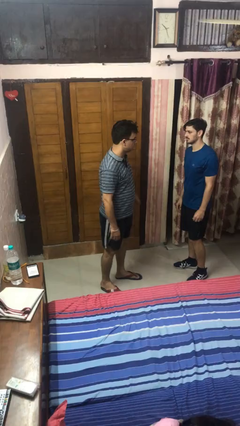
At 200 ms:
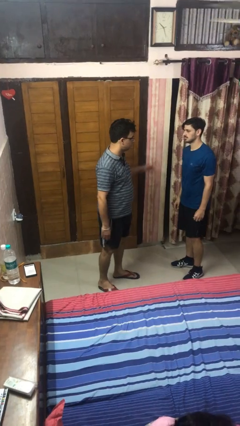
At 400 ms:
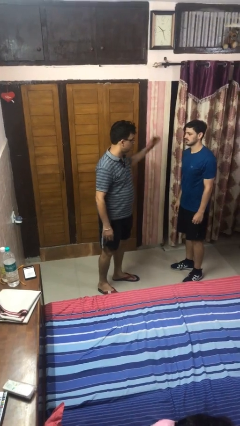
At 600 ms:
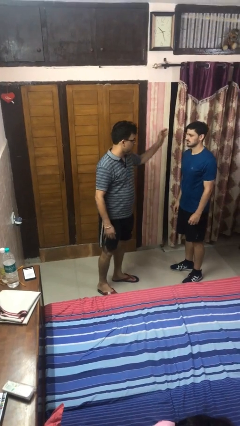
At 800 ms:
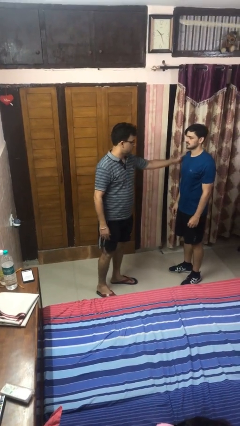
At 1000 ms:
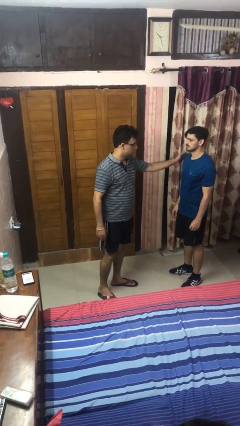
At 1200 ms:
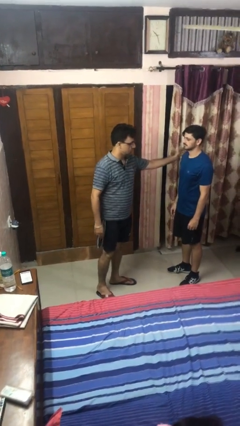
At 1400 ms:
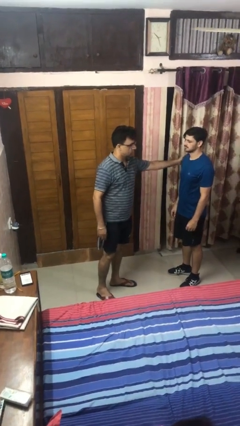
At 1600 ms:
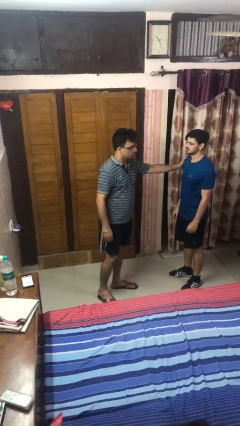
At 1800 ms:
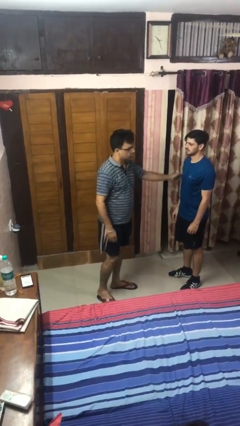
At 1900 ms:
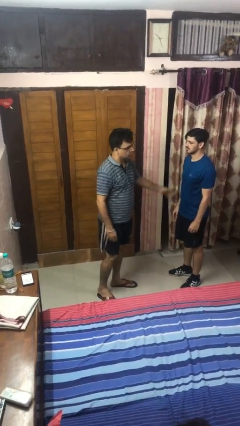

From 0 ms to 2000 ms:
person pounds shoulders of person

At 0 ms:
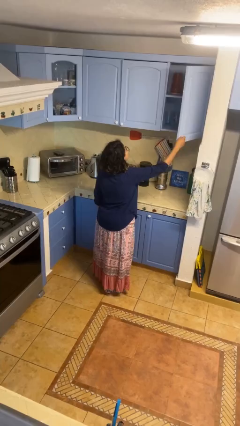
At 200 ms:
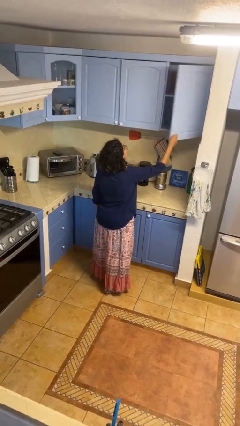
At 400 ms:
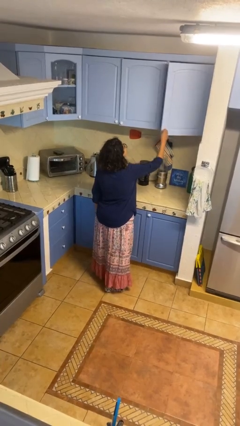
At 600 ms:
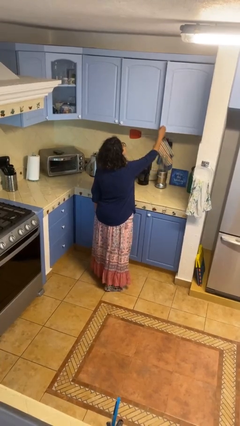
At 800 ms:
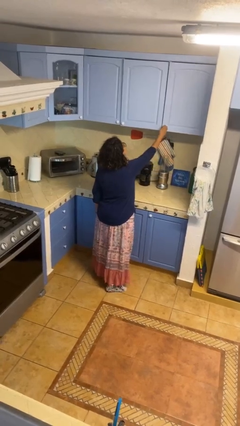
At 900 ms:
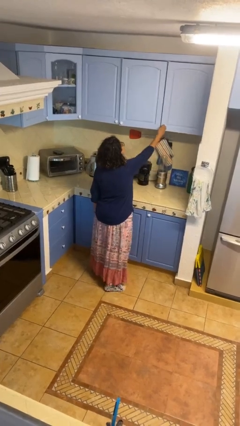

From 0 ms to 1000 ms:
person closes cabinet

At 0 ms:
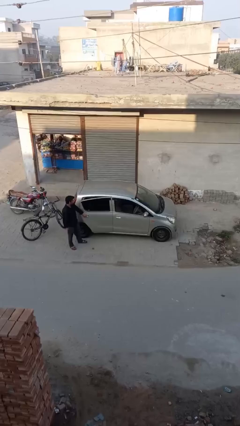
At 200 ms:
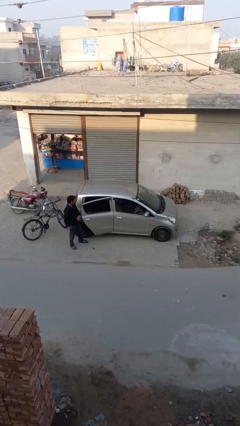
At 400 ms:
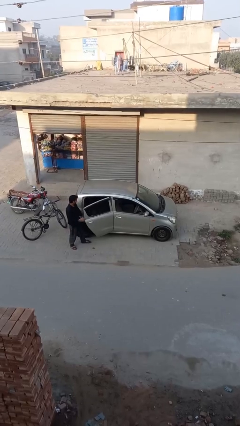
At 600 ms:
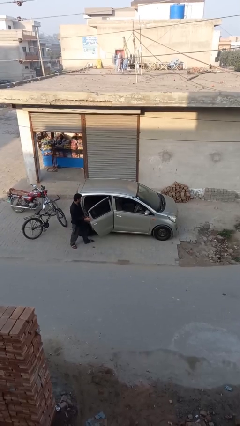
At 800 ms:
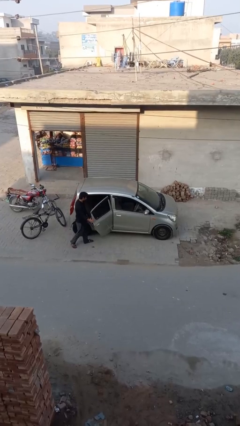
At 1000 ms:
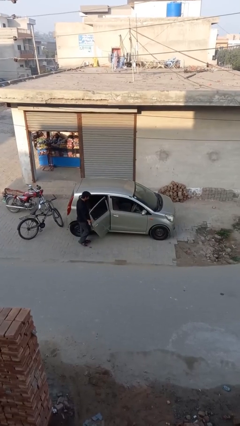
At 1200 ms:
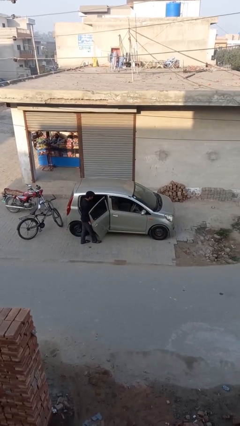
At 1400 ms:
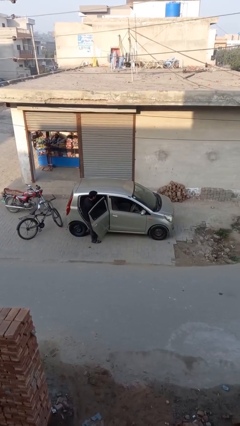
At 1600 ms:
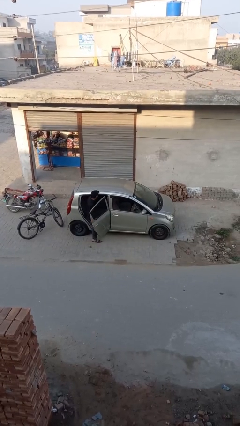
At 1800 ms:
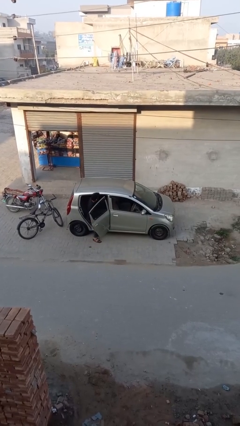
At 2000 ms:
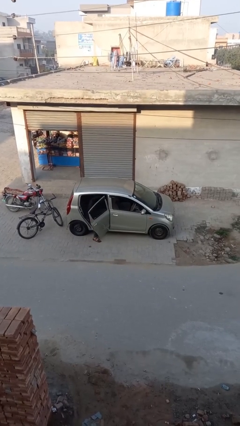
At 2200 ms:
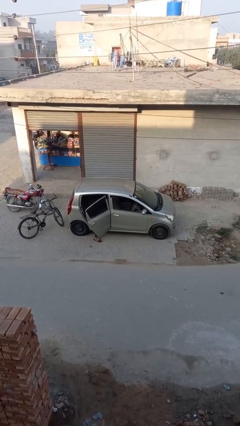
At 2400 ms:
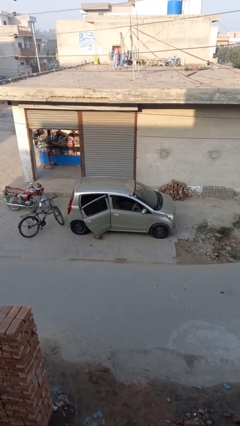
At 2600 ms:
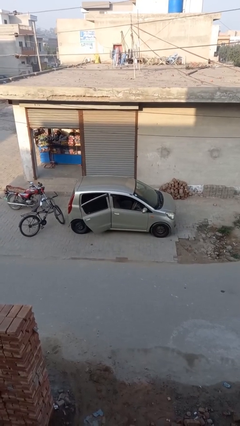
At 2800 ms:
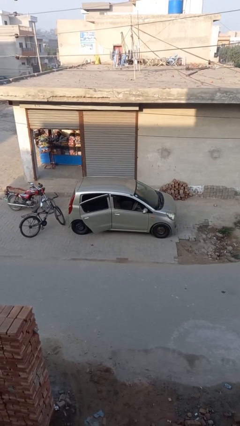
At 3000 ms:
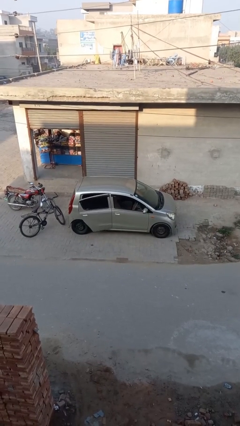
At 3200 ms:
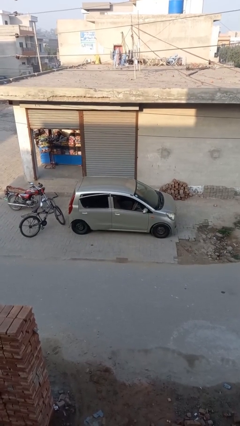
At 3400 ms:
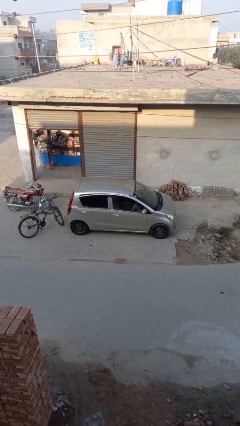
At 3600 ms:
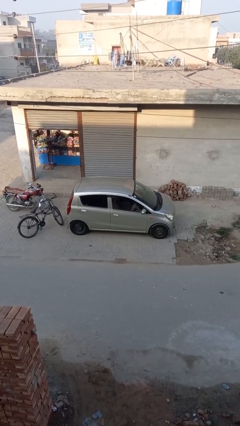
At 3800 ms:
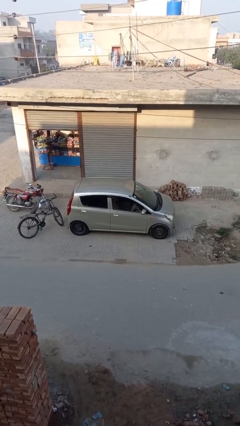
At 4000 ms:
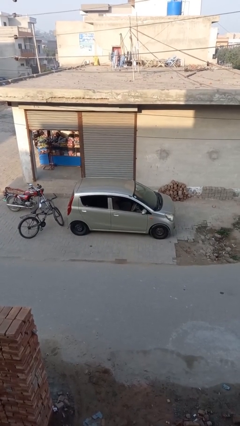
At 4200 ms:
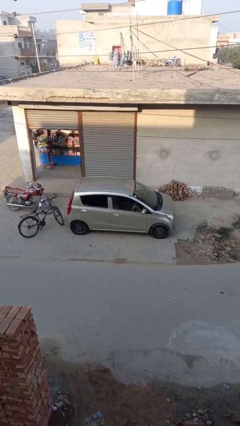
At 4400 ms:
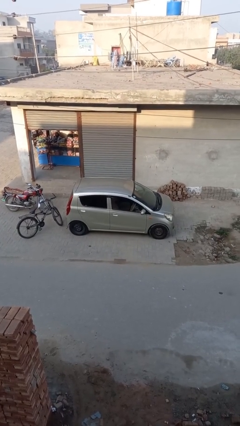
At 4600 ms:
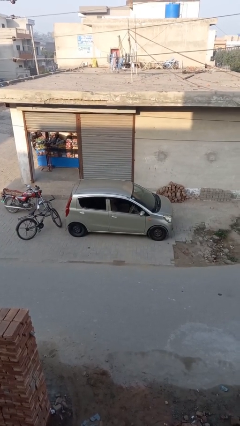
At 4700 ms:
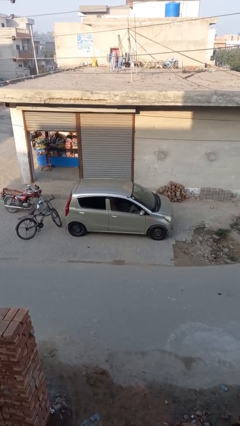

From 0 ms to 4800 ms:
car picks up person

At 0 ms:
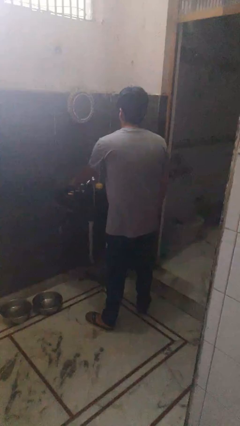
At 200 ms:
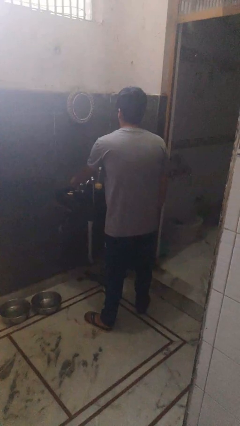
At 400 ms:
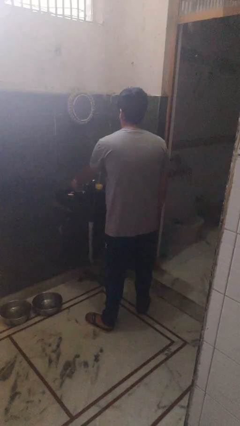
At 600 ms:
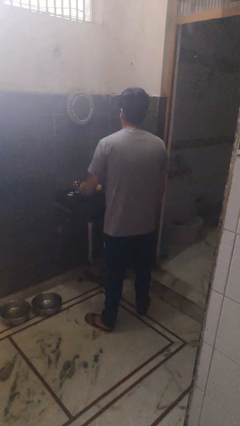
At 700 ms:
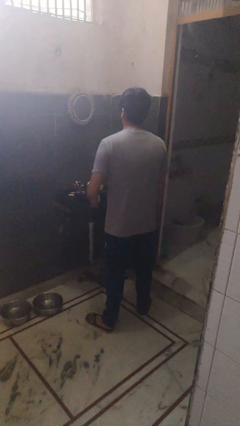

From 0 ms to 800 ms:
person turns off faucet

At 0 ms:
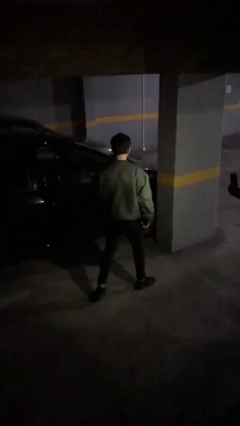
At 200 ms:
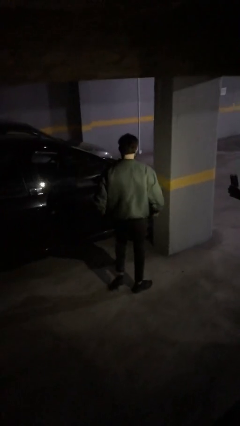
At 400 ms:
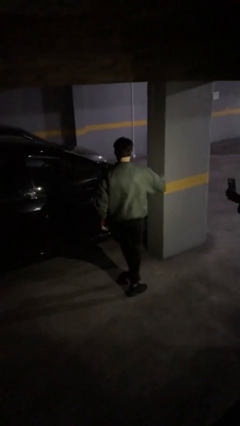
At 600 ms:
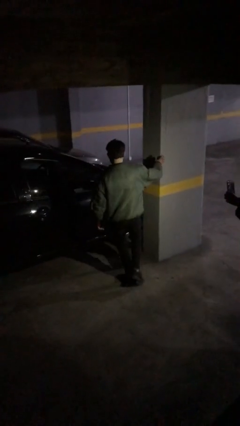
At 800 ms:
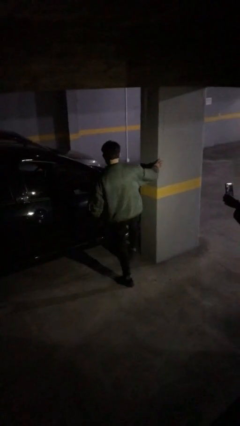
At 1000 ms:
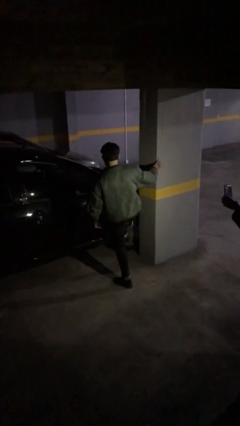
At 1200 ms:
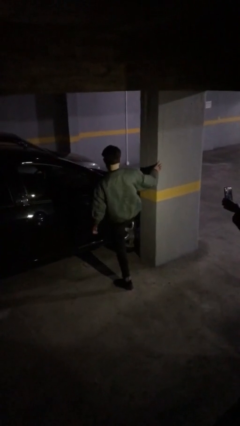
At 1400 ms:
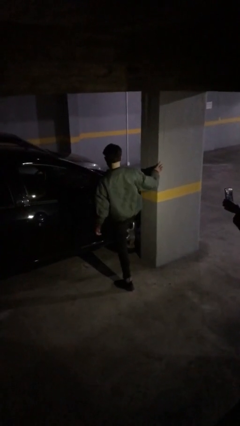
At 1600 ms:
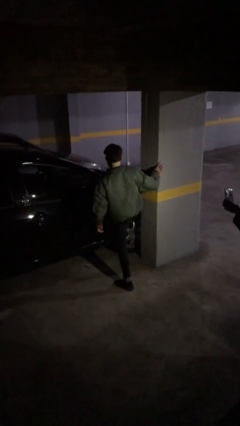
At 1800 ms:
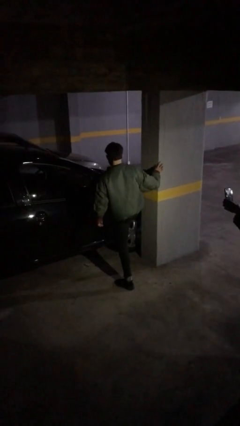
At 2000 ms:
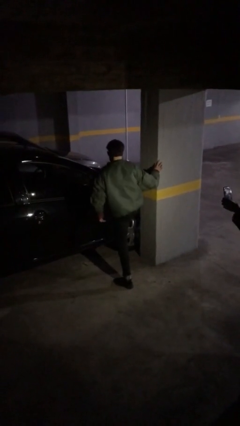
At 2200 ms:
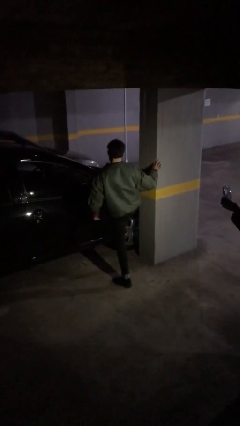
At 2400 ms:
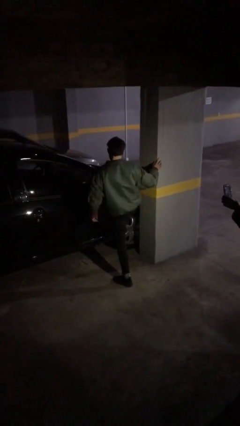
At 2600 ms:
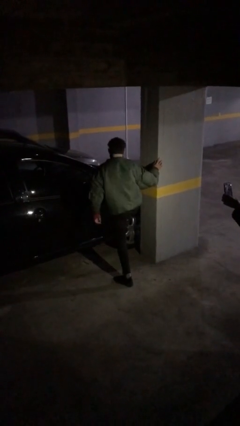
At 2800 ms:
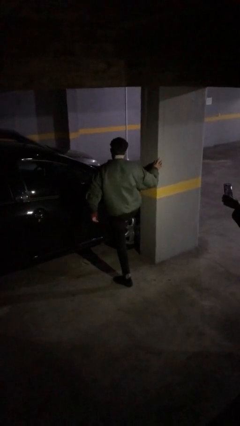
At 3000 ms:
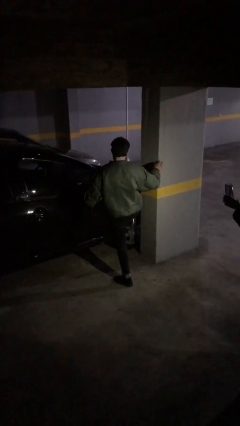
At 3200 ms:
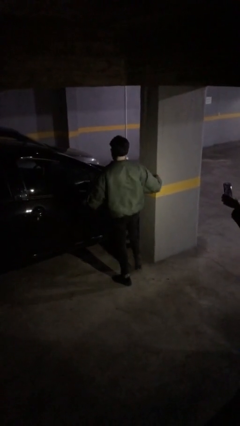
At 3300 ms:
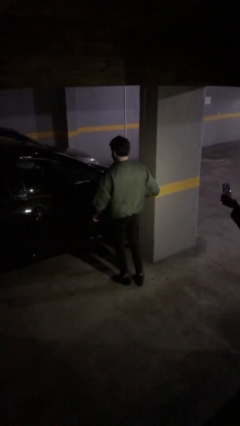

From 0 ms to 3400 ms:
person kicks car tires

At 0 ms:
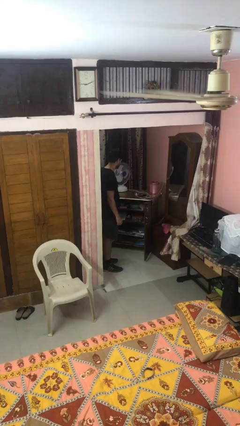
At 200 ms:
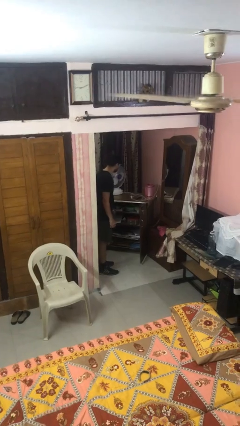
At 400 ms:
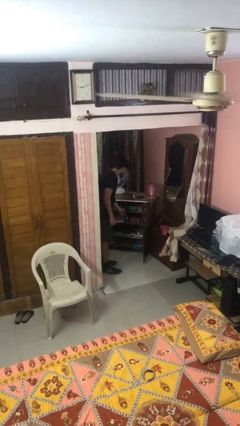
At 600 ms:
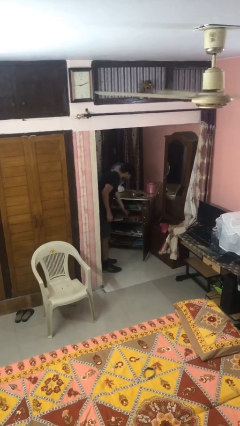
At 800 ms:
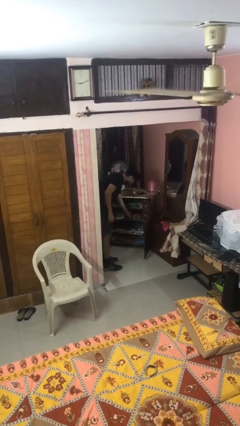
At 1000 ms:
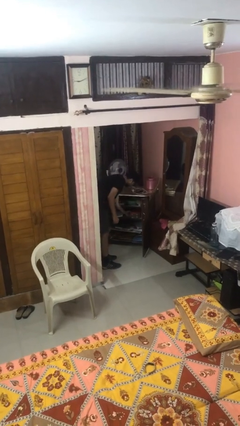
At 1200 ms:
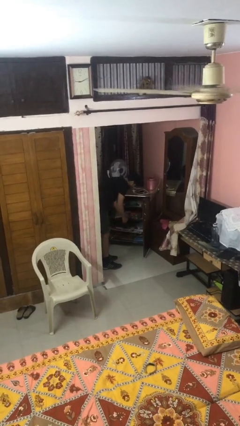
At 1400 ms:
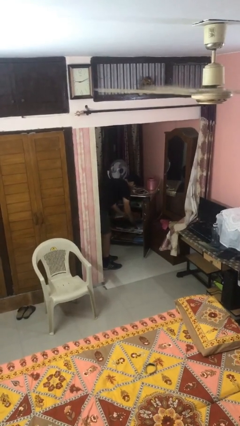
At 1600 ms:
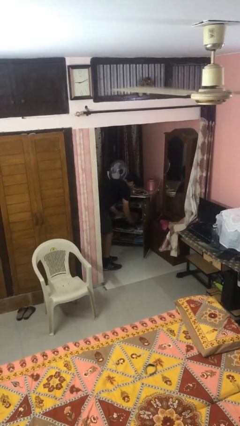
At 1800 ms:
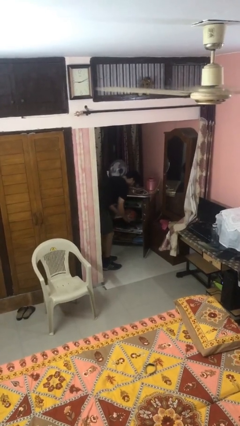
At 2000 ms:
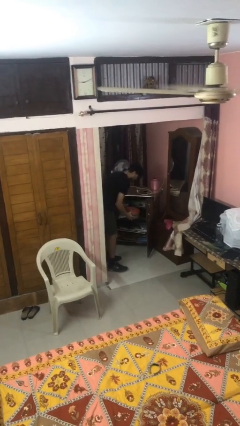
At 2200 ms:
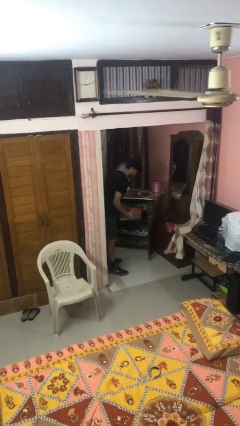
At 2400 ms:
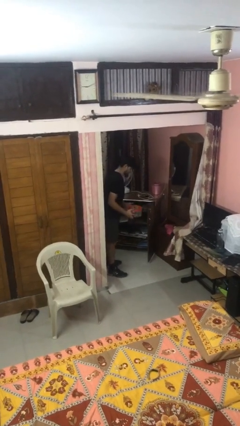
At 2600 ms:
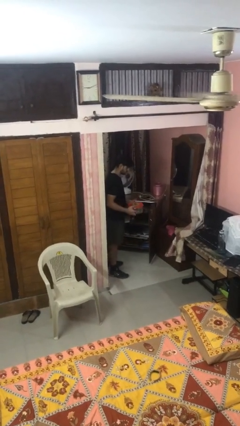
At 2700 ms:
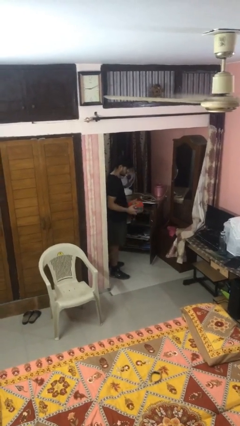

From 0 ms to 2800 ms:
person picks up object from cabinet

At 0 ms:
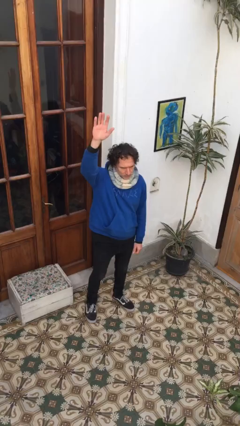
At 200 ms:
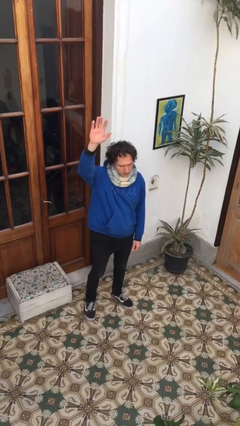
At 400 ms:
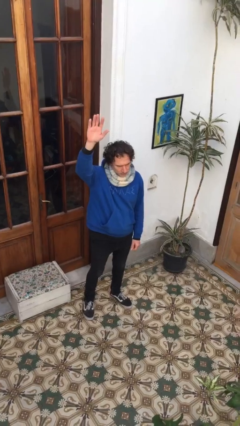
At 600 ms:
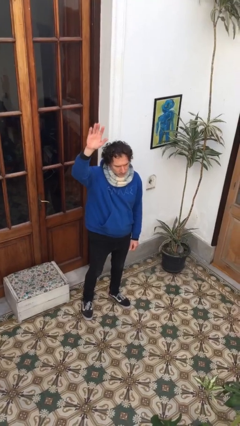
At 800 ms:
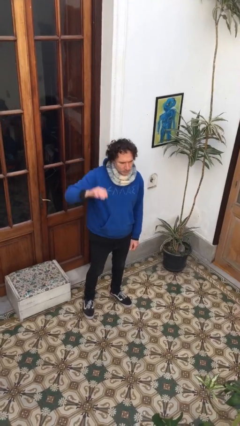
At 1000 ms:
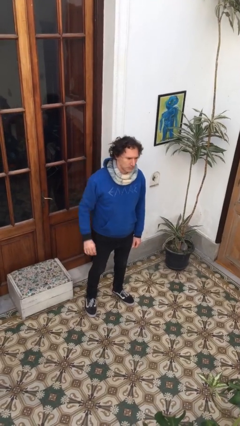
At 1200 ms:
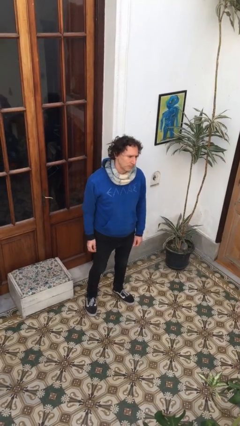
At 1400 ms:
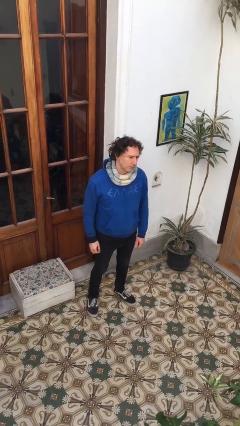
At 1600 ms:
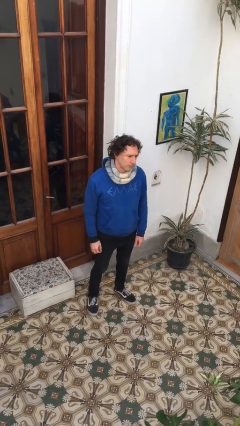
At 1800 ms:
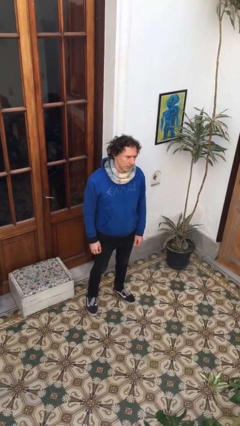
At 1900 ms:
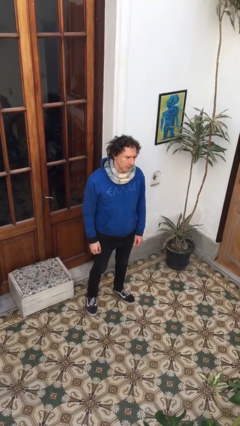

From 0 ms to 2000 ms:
person gestures lower hand
